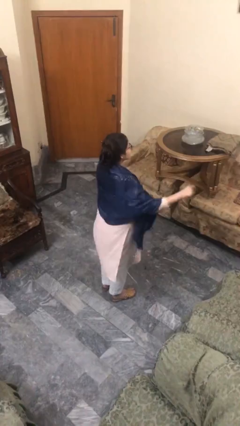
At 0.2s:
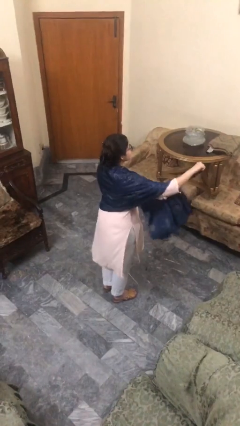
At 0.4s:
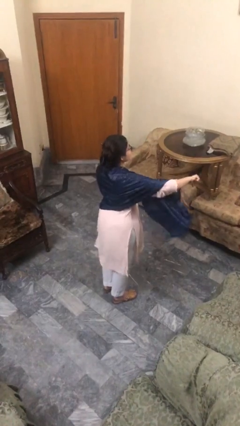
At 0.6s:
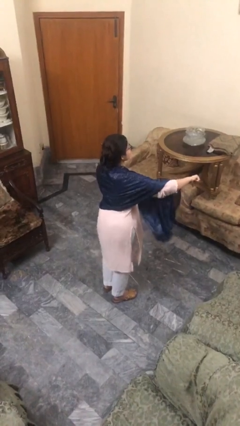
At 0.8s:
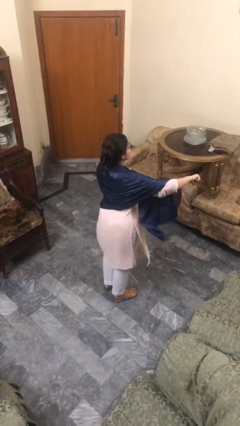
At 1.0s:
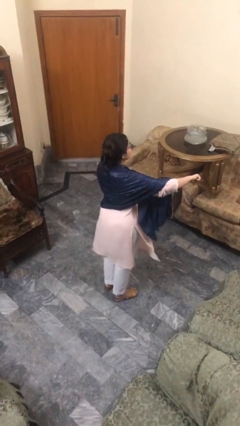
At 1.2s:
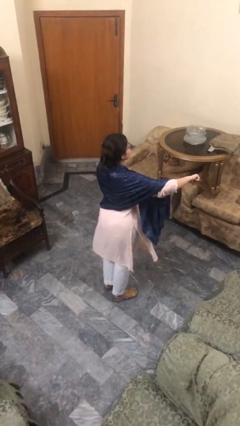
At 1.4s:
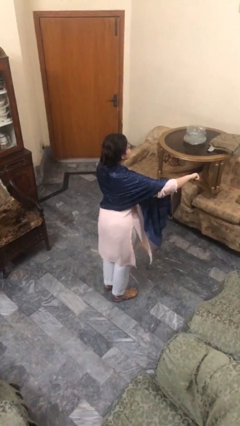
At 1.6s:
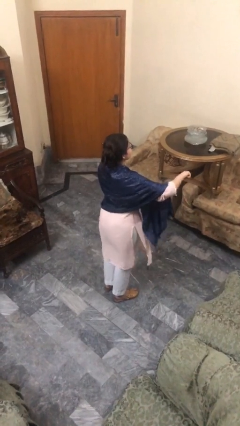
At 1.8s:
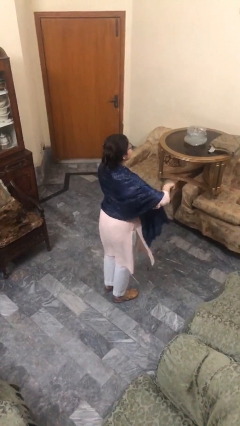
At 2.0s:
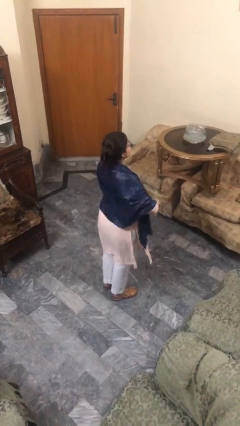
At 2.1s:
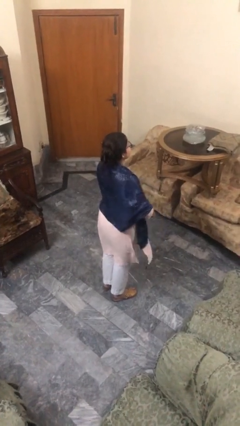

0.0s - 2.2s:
person gestures thumbs down

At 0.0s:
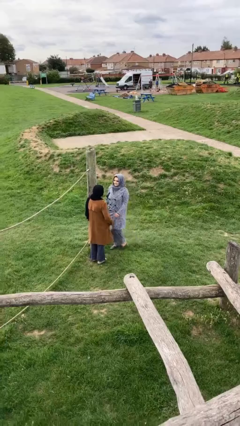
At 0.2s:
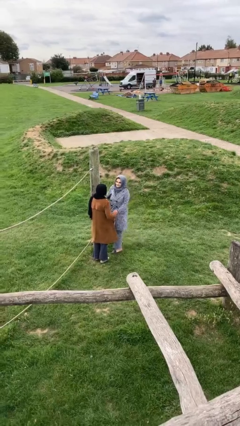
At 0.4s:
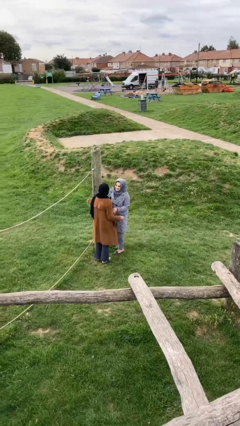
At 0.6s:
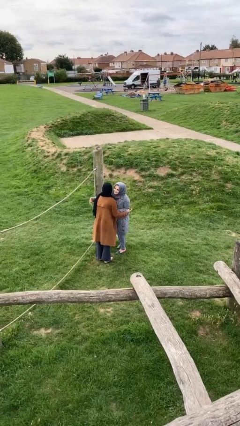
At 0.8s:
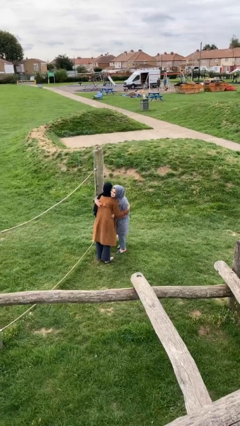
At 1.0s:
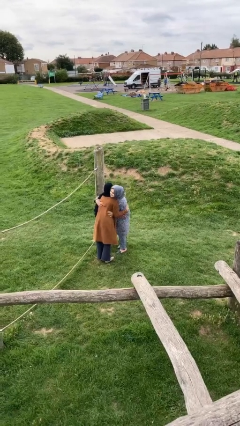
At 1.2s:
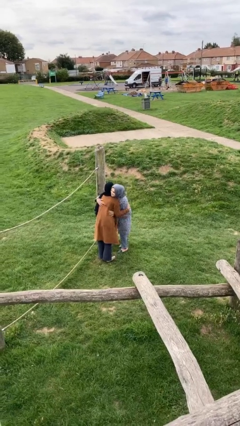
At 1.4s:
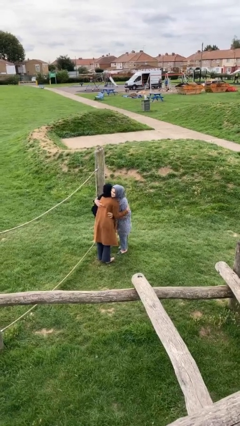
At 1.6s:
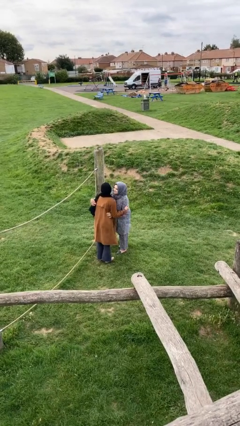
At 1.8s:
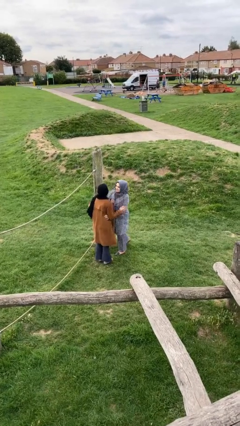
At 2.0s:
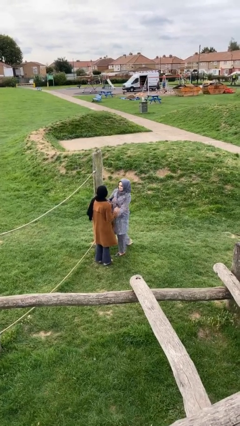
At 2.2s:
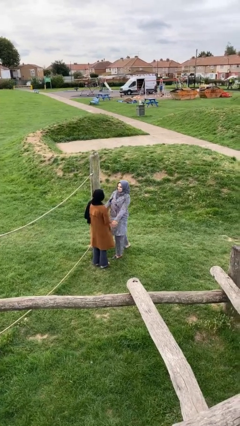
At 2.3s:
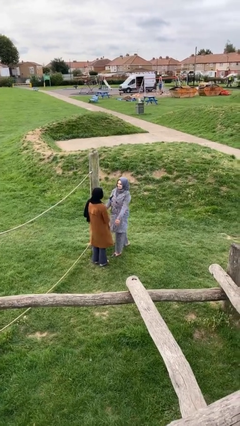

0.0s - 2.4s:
person embraces person

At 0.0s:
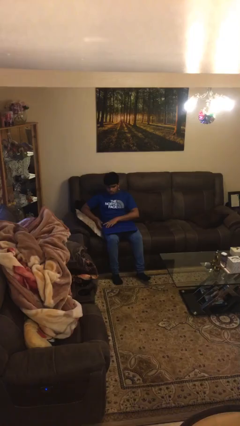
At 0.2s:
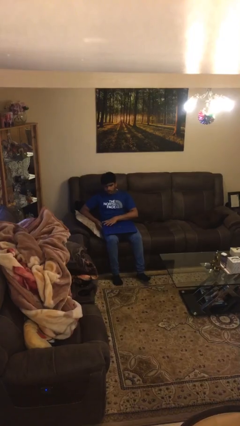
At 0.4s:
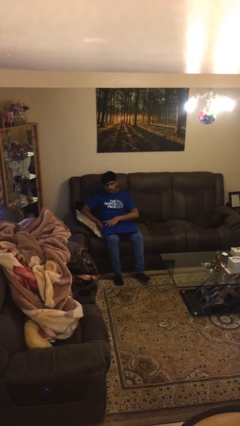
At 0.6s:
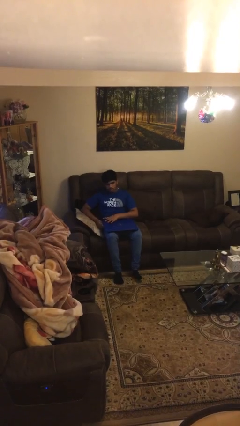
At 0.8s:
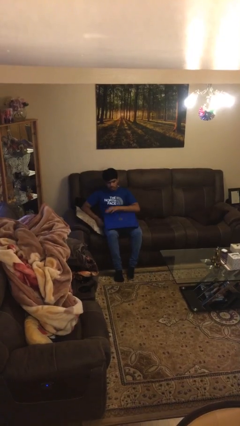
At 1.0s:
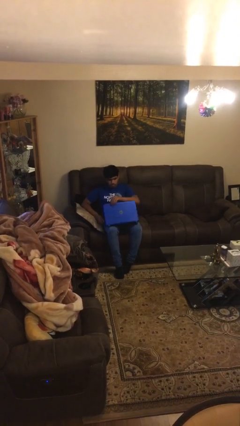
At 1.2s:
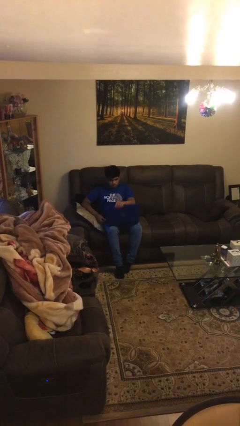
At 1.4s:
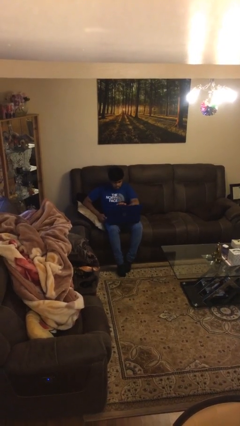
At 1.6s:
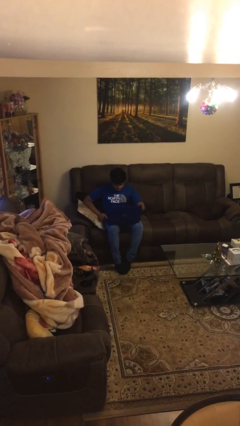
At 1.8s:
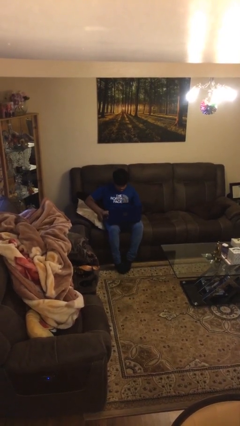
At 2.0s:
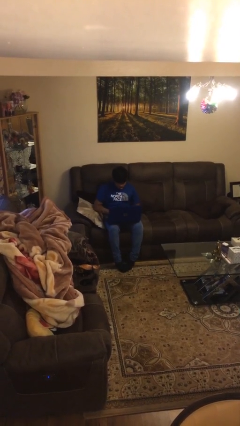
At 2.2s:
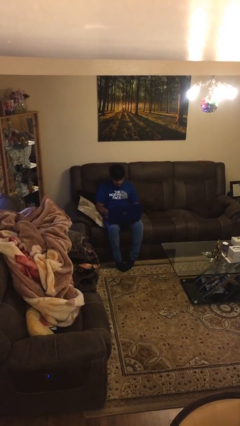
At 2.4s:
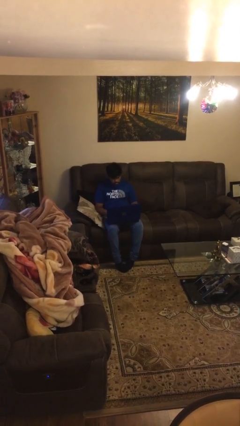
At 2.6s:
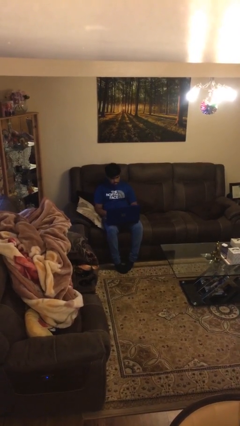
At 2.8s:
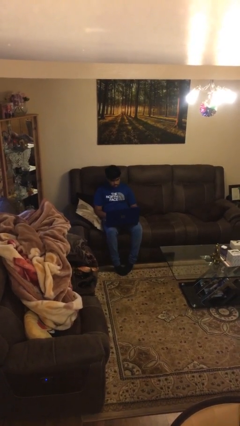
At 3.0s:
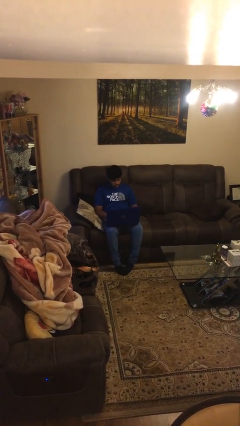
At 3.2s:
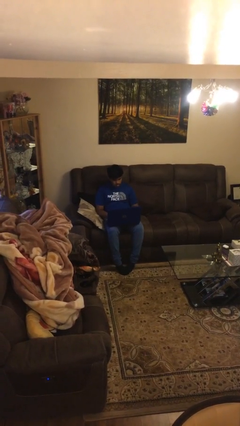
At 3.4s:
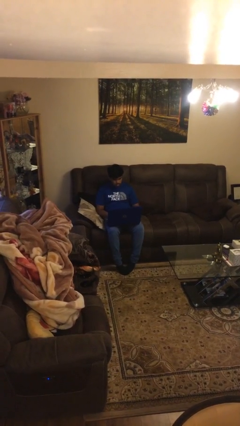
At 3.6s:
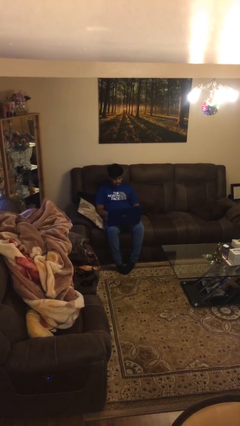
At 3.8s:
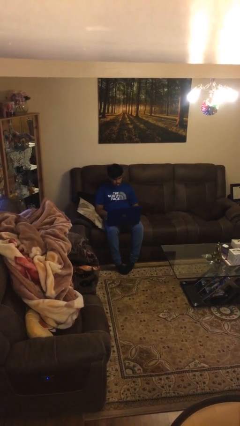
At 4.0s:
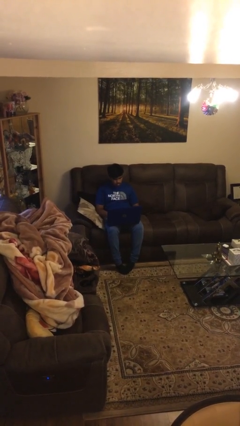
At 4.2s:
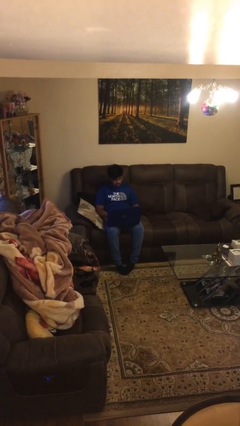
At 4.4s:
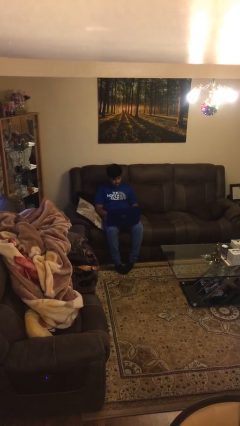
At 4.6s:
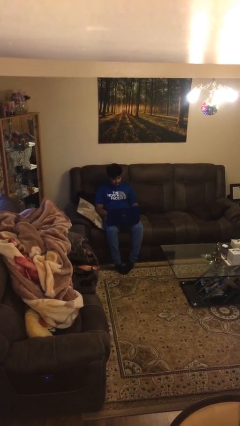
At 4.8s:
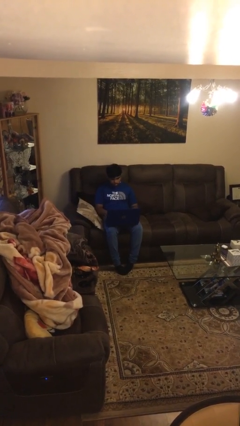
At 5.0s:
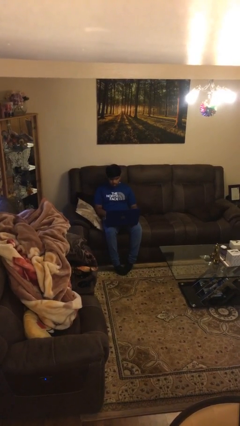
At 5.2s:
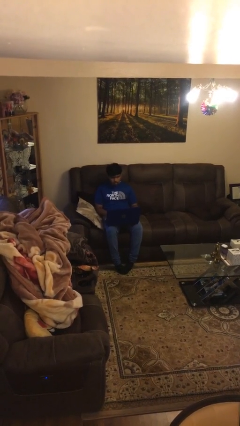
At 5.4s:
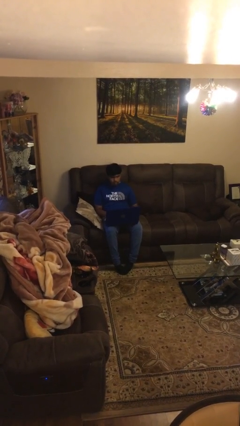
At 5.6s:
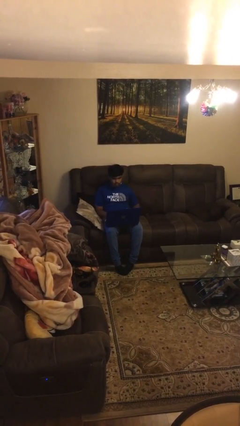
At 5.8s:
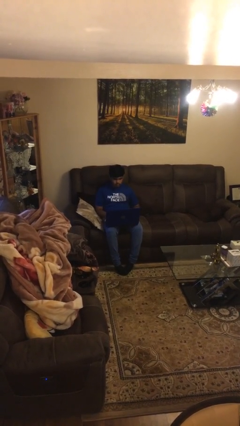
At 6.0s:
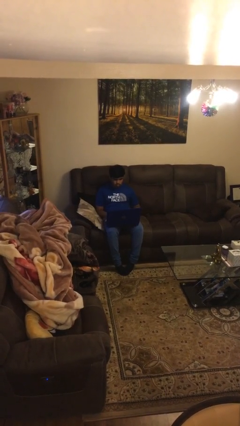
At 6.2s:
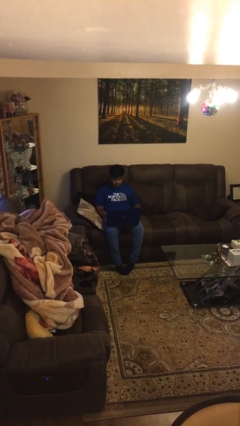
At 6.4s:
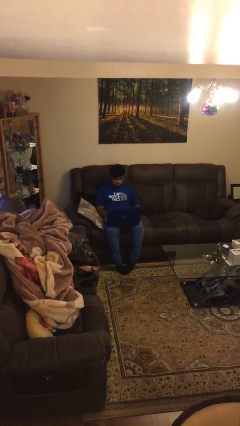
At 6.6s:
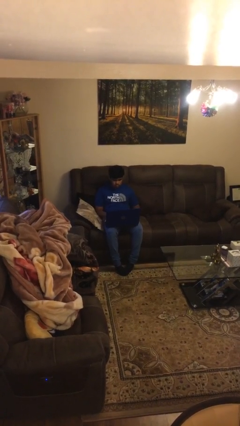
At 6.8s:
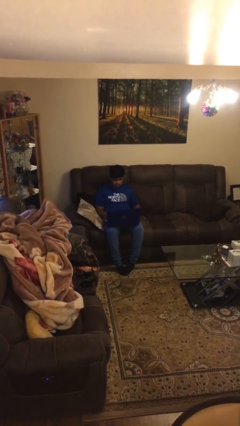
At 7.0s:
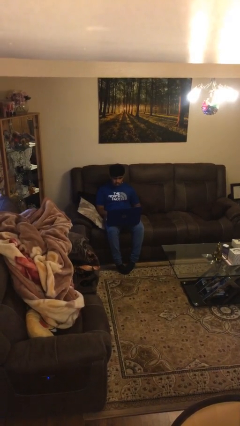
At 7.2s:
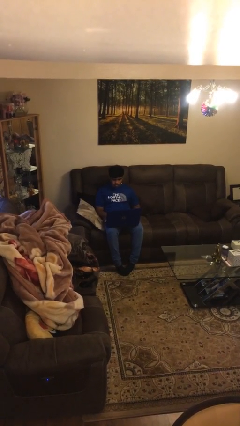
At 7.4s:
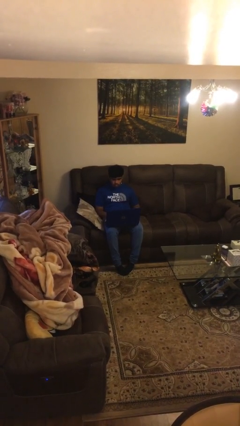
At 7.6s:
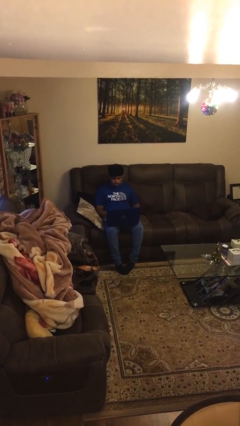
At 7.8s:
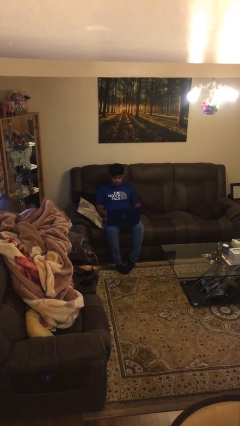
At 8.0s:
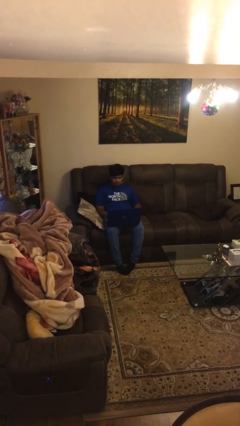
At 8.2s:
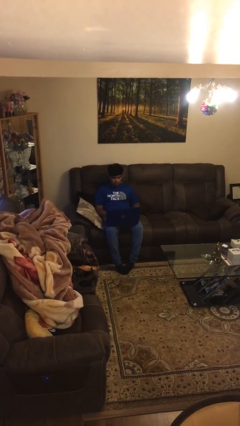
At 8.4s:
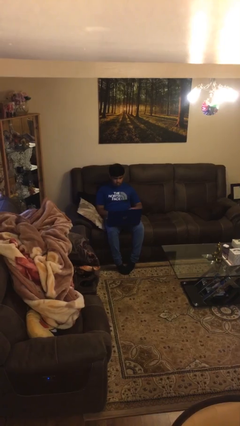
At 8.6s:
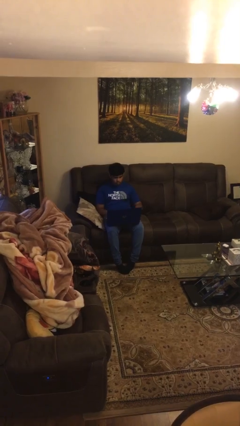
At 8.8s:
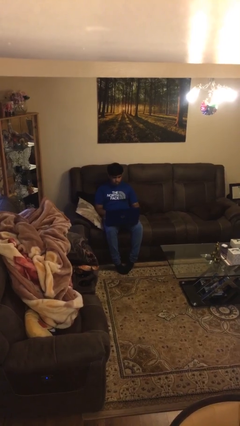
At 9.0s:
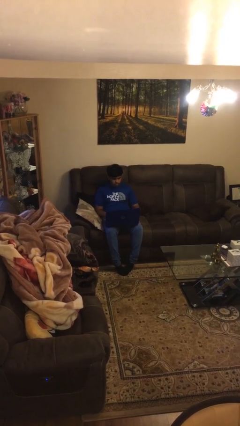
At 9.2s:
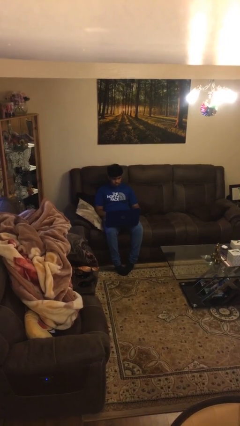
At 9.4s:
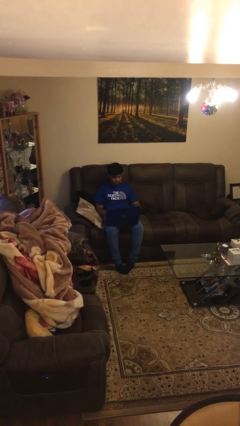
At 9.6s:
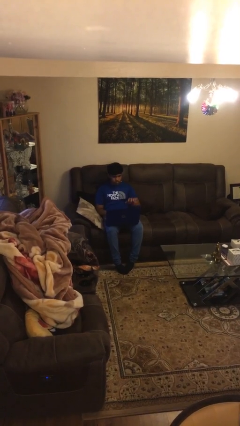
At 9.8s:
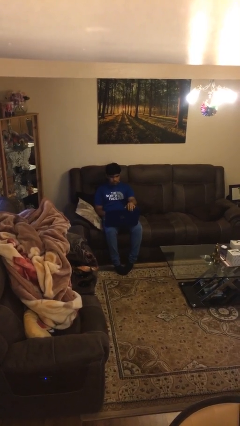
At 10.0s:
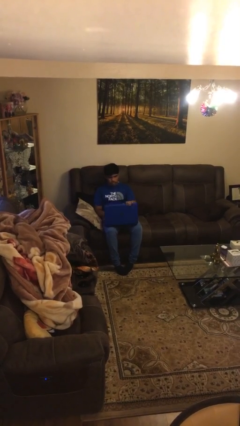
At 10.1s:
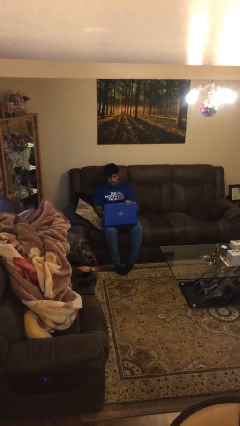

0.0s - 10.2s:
person interacts with laptop

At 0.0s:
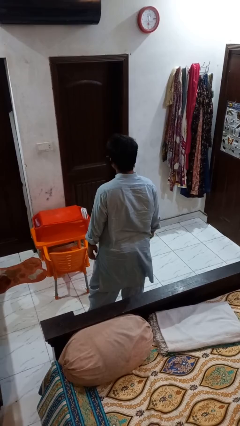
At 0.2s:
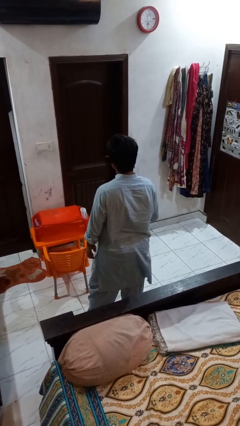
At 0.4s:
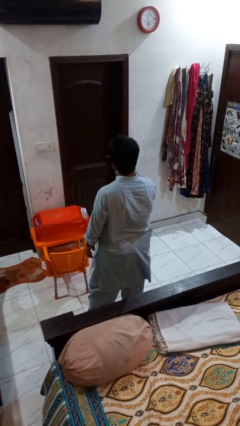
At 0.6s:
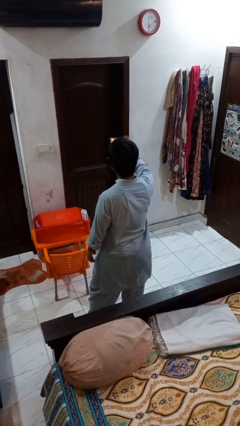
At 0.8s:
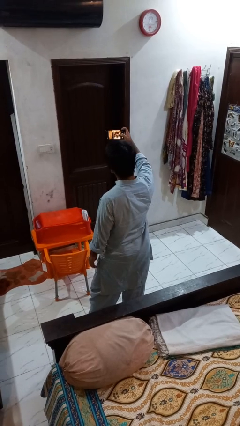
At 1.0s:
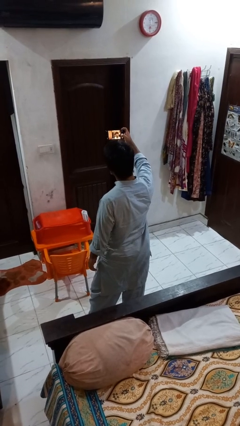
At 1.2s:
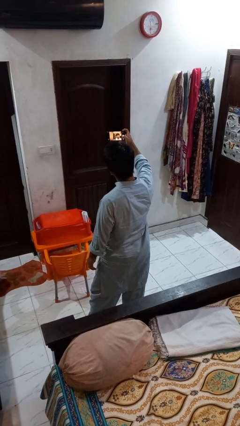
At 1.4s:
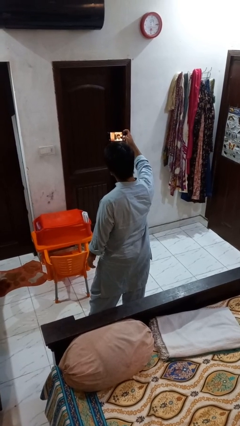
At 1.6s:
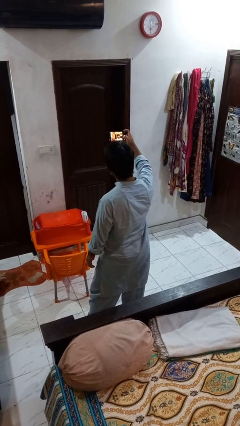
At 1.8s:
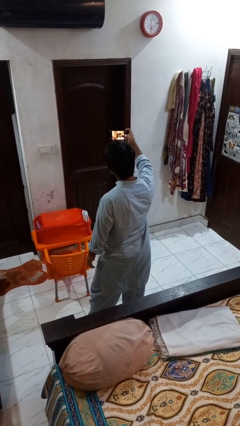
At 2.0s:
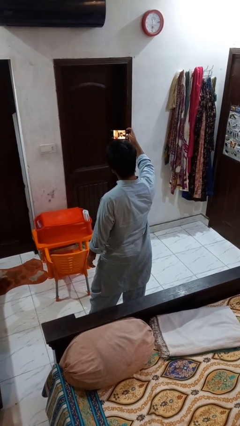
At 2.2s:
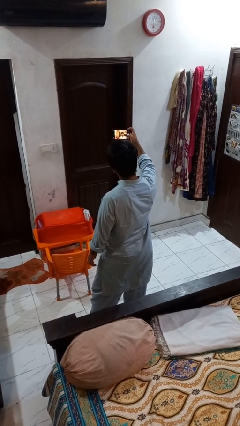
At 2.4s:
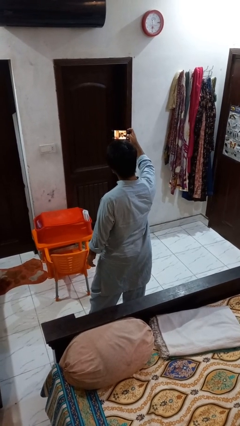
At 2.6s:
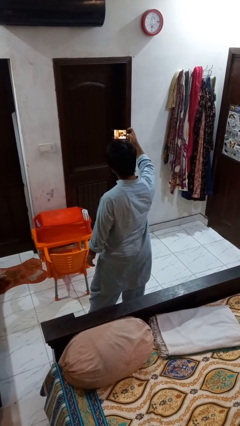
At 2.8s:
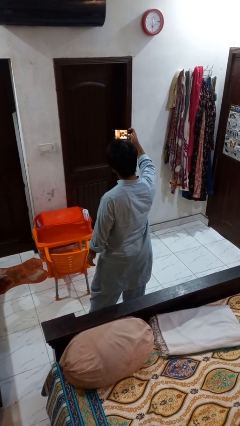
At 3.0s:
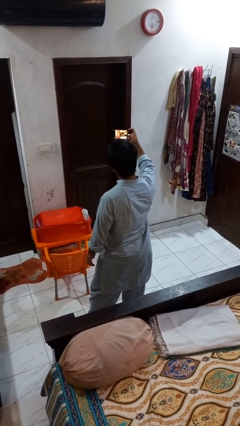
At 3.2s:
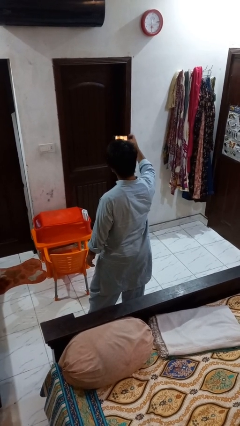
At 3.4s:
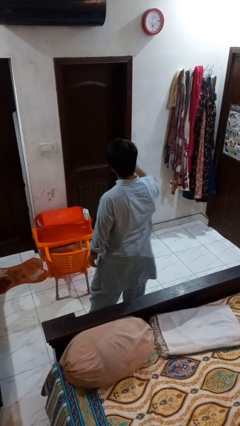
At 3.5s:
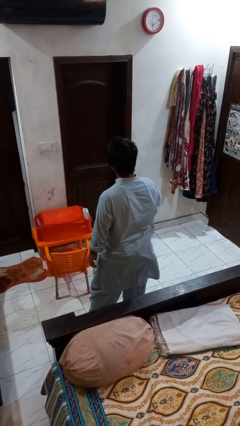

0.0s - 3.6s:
person takes selfie
